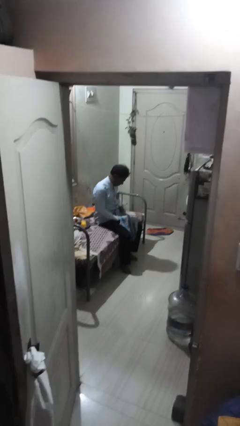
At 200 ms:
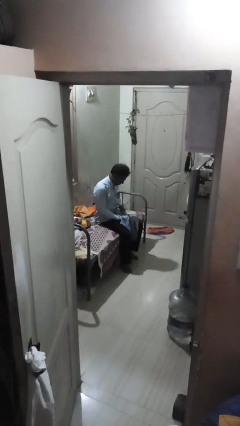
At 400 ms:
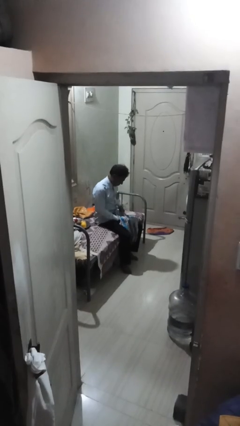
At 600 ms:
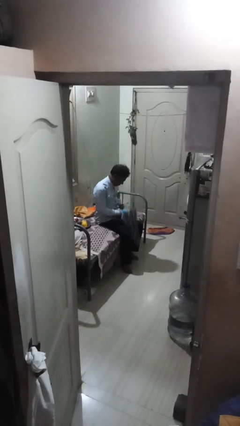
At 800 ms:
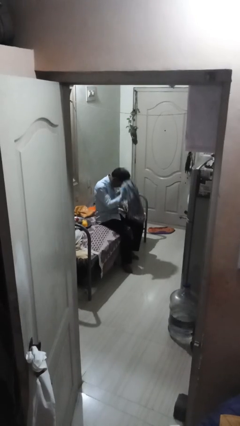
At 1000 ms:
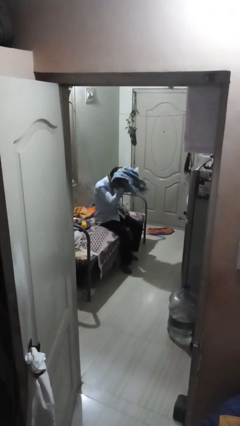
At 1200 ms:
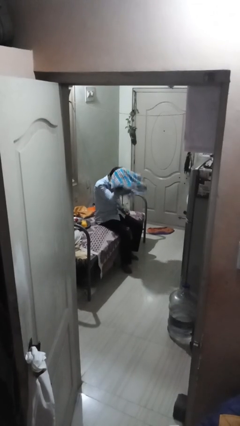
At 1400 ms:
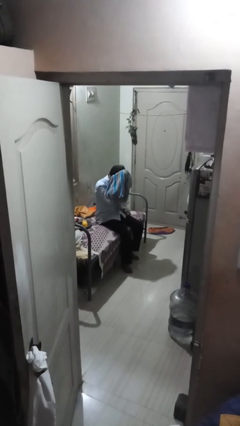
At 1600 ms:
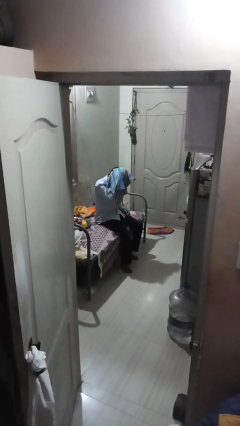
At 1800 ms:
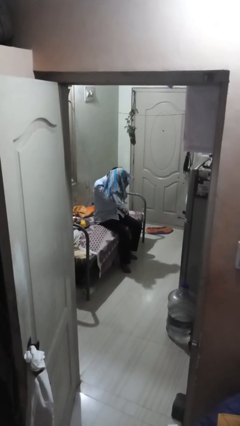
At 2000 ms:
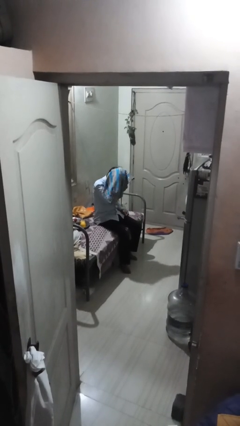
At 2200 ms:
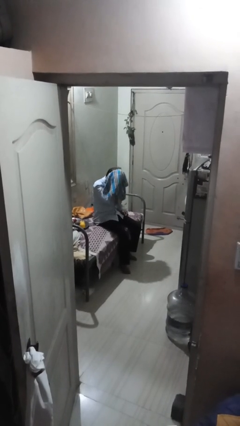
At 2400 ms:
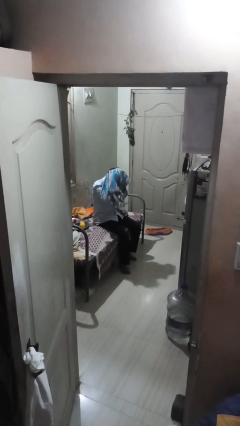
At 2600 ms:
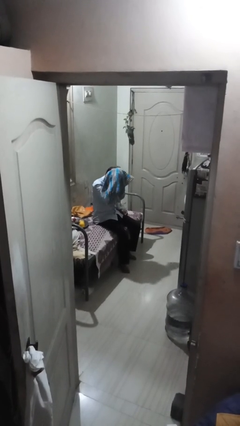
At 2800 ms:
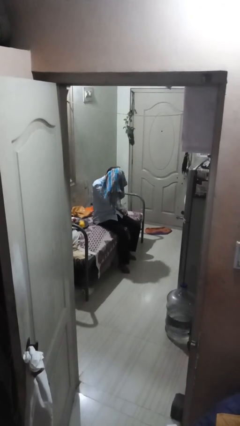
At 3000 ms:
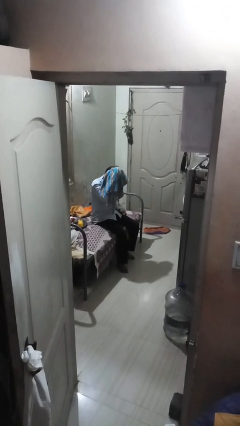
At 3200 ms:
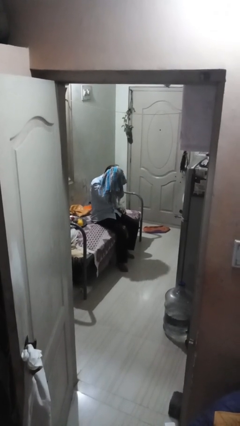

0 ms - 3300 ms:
person dries hair with towel

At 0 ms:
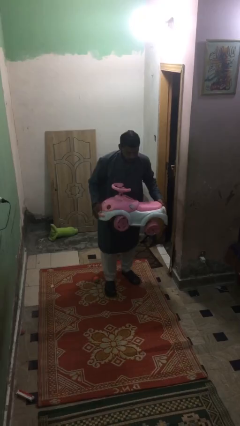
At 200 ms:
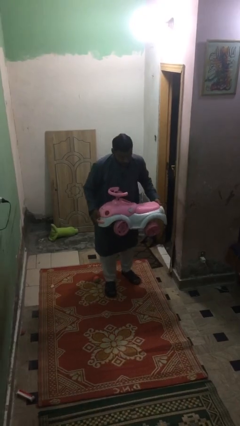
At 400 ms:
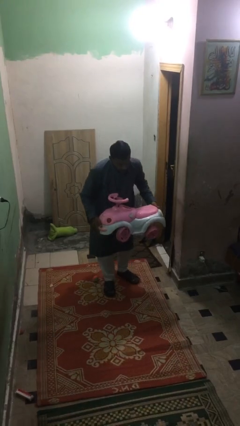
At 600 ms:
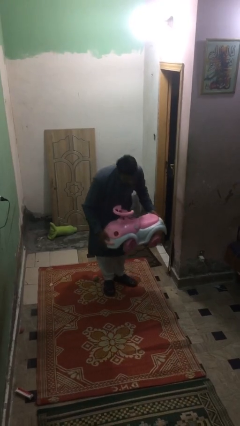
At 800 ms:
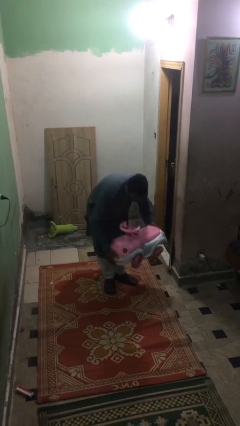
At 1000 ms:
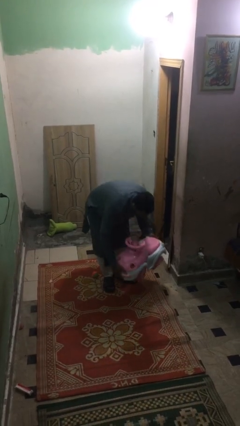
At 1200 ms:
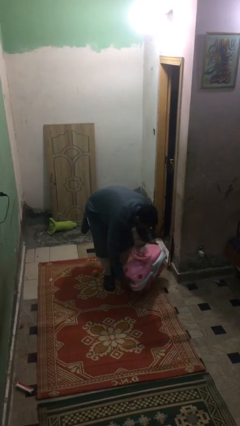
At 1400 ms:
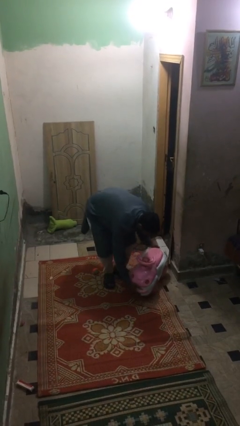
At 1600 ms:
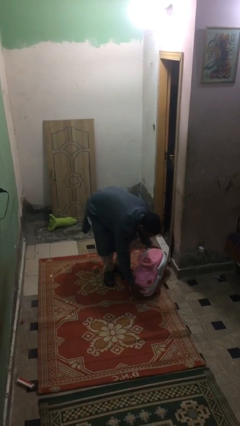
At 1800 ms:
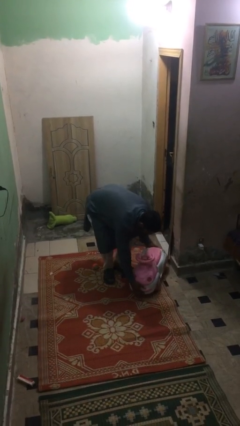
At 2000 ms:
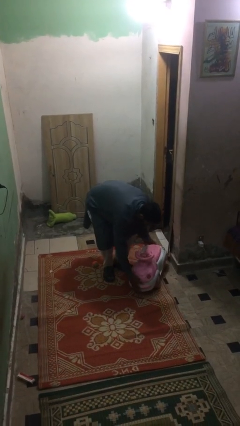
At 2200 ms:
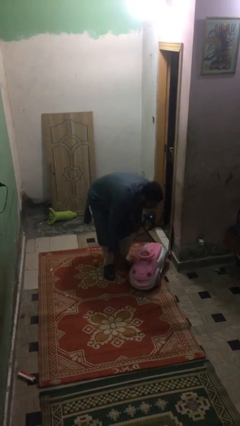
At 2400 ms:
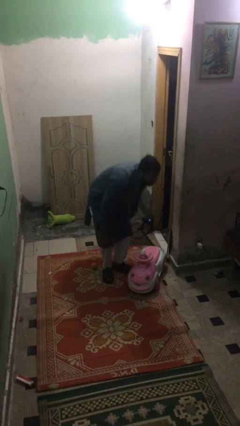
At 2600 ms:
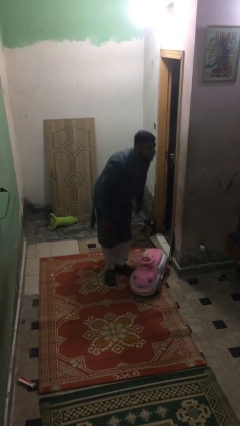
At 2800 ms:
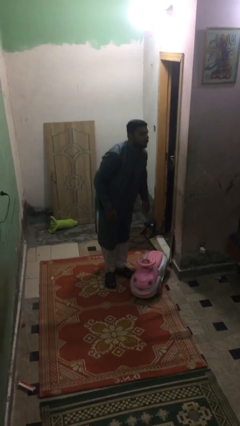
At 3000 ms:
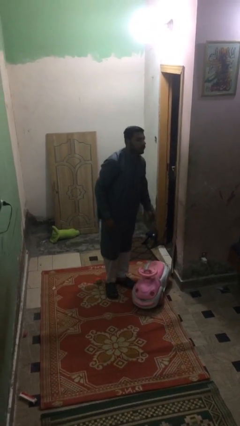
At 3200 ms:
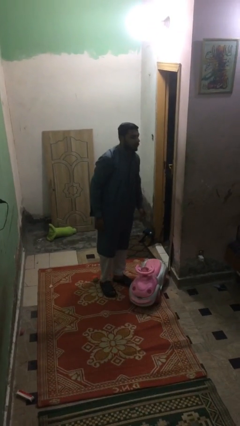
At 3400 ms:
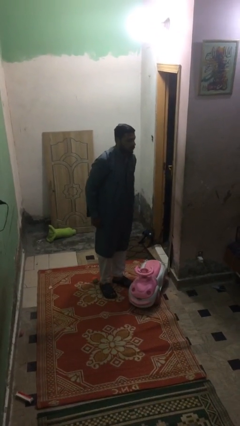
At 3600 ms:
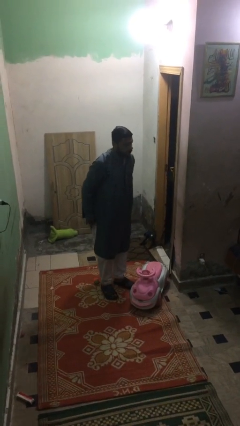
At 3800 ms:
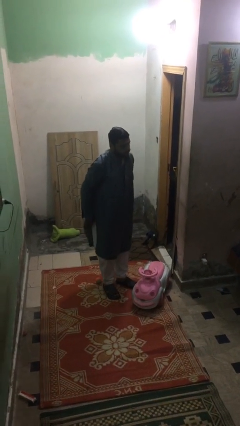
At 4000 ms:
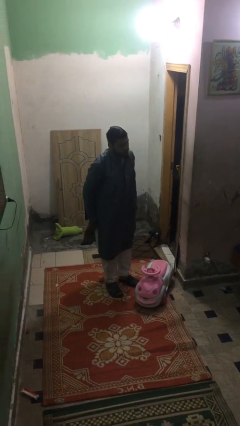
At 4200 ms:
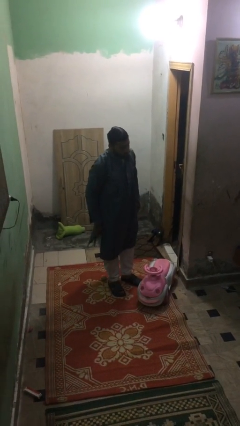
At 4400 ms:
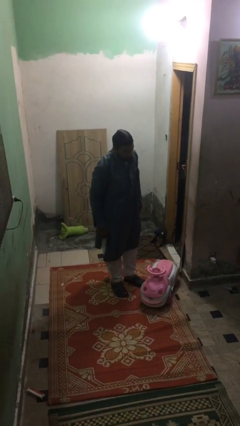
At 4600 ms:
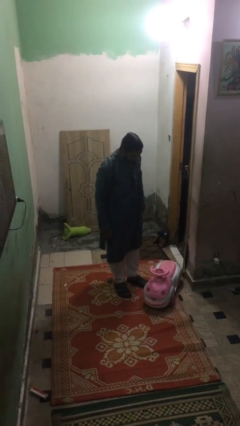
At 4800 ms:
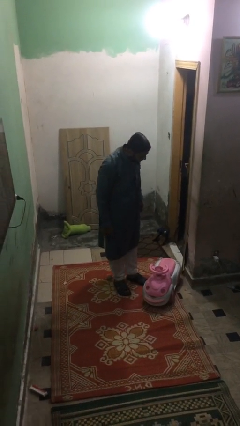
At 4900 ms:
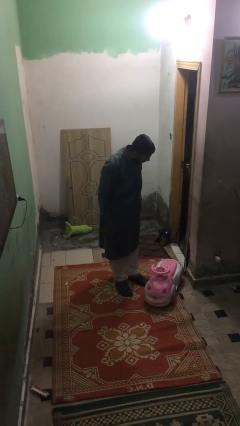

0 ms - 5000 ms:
person puts down object on floor

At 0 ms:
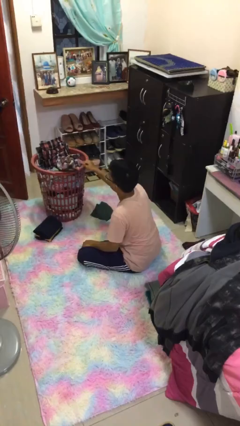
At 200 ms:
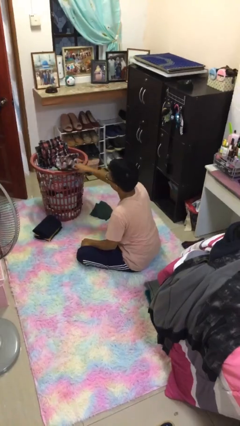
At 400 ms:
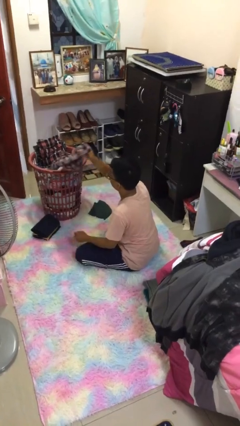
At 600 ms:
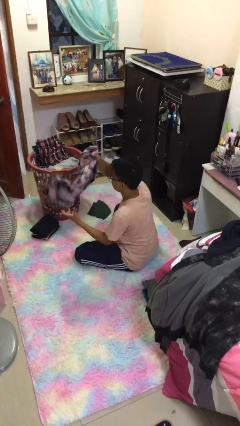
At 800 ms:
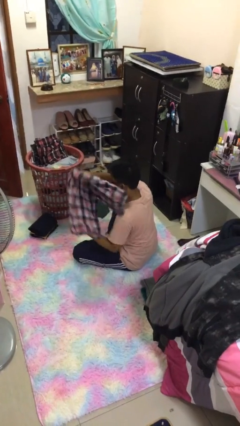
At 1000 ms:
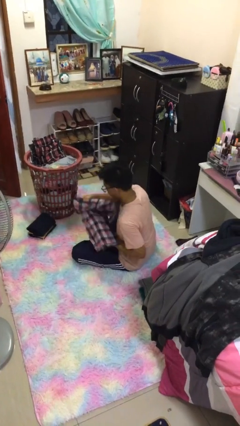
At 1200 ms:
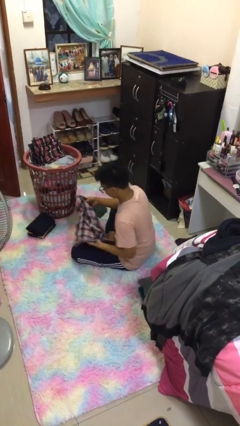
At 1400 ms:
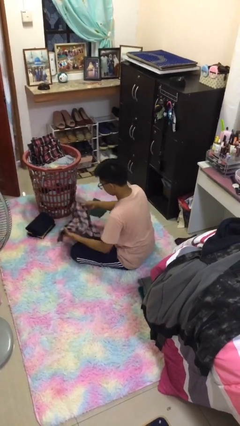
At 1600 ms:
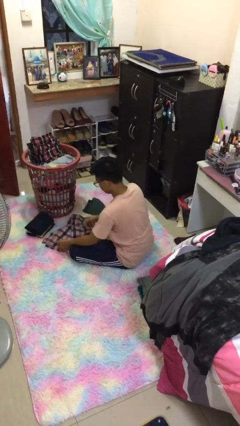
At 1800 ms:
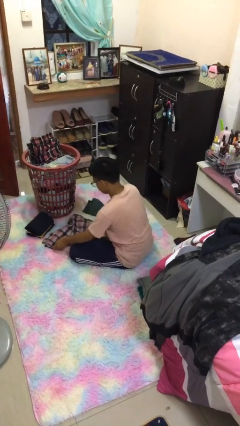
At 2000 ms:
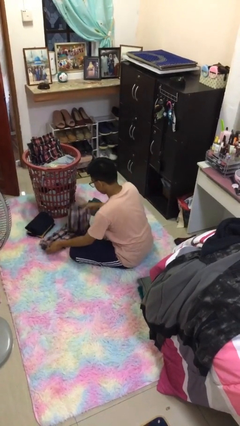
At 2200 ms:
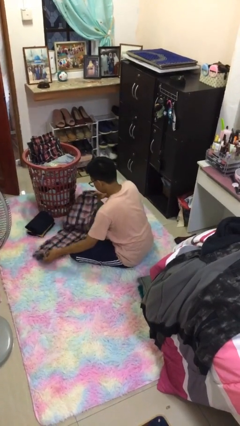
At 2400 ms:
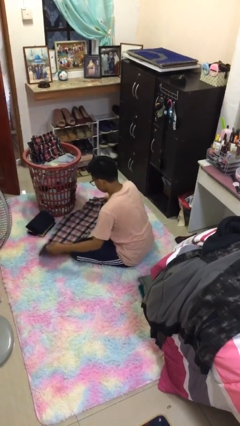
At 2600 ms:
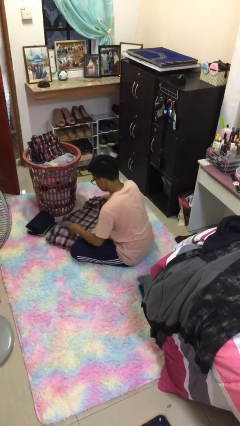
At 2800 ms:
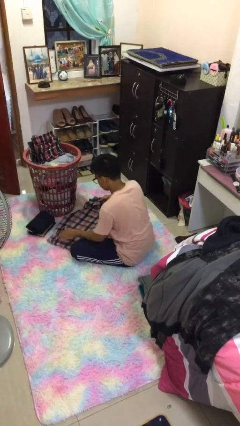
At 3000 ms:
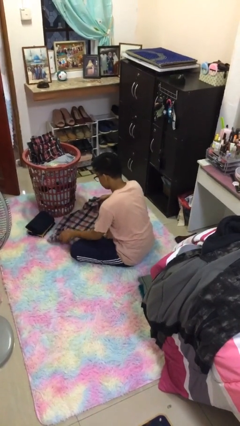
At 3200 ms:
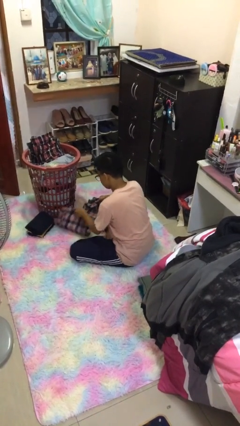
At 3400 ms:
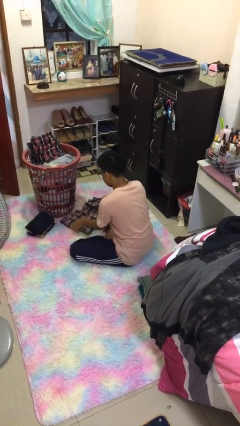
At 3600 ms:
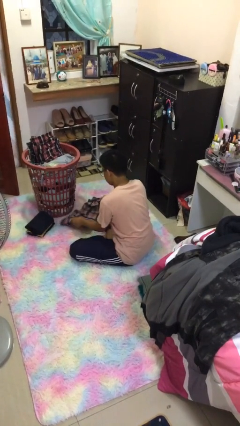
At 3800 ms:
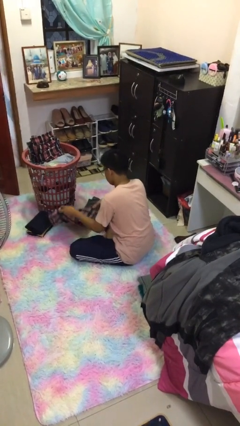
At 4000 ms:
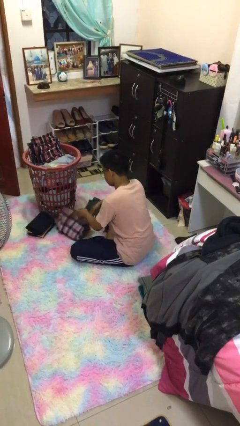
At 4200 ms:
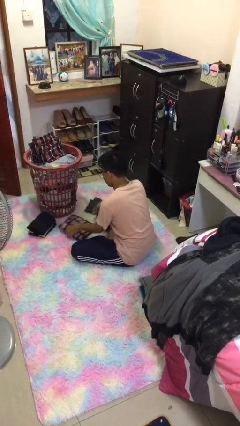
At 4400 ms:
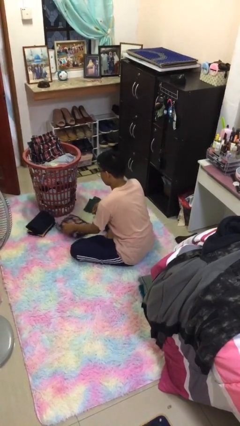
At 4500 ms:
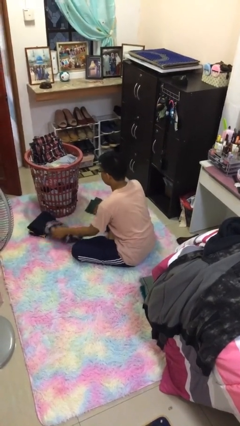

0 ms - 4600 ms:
person folds pants

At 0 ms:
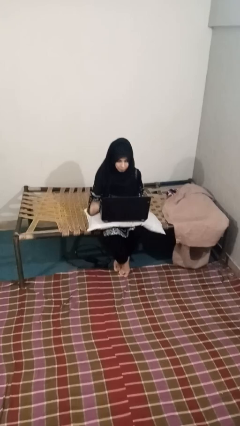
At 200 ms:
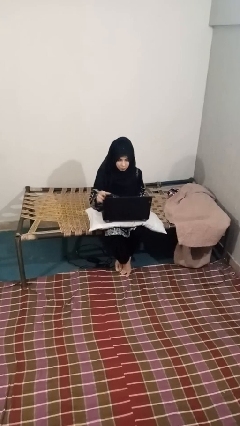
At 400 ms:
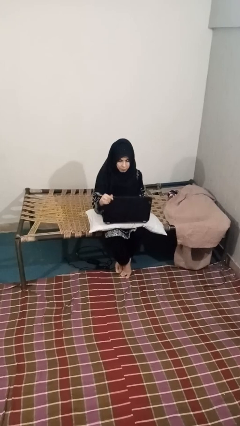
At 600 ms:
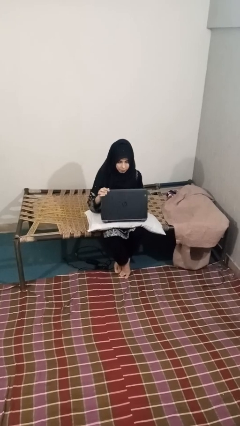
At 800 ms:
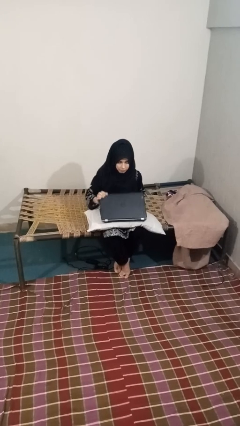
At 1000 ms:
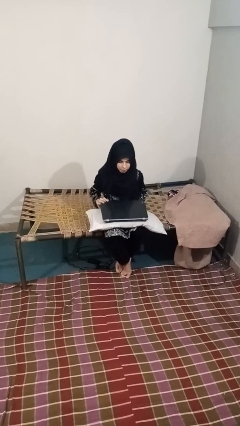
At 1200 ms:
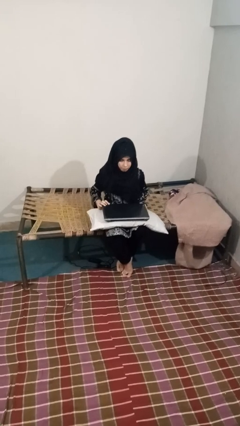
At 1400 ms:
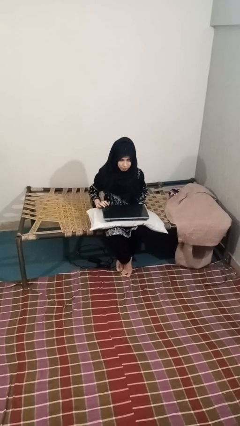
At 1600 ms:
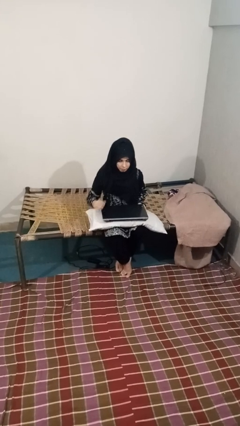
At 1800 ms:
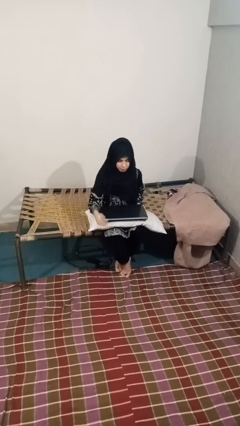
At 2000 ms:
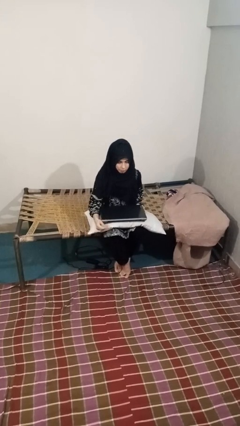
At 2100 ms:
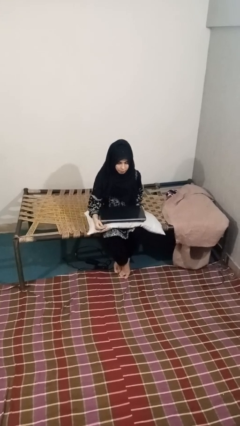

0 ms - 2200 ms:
person closes laptop

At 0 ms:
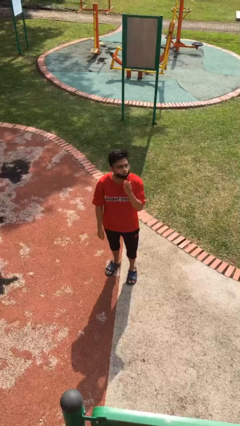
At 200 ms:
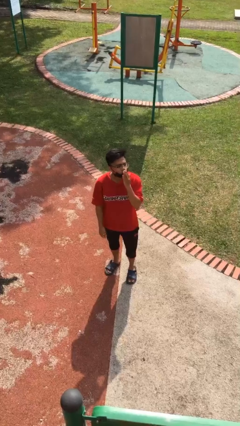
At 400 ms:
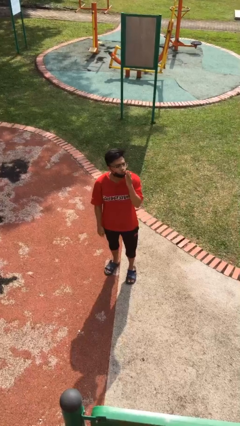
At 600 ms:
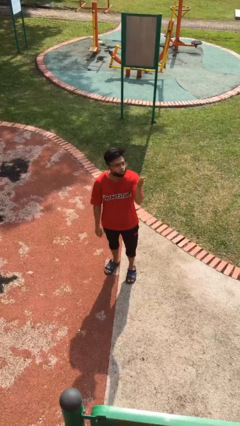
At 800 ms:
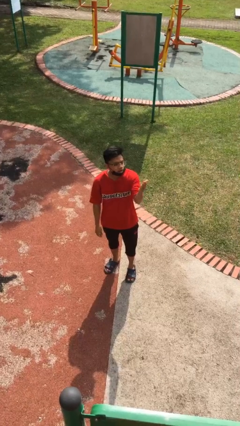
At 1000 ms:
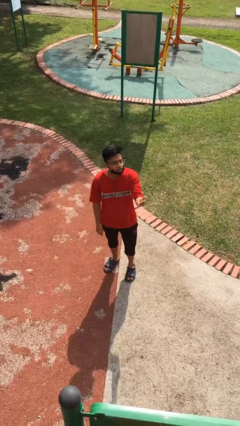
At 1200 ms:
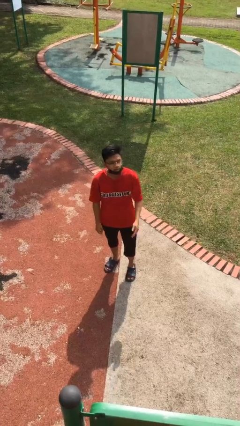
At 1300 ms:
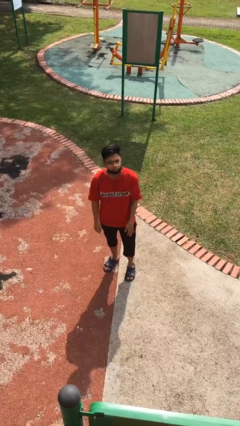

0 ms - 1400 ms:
person gestures blow kiss

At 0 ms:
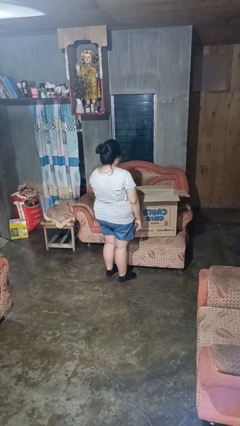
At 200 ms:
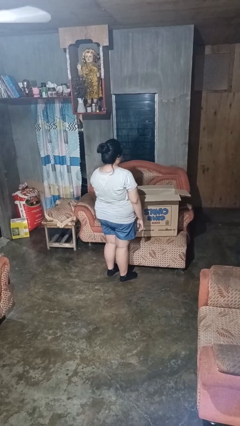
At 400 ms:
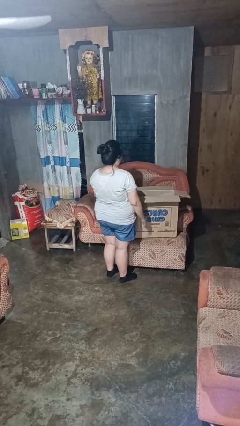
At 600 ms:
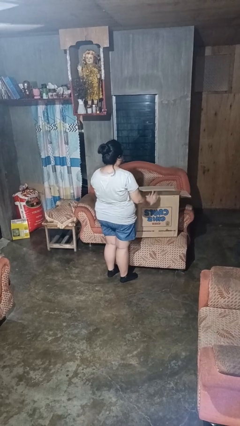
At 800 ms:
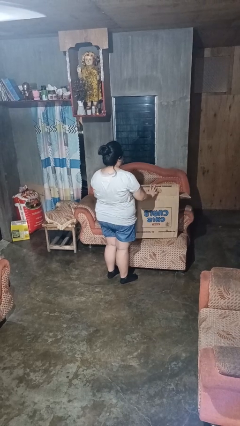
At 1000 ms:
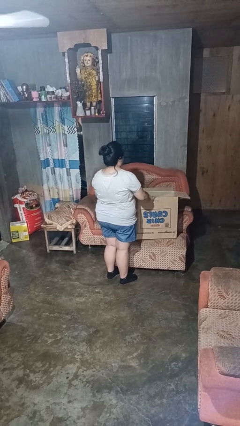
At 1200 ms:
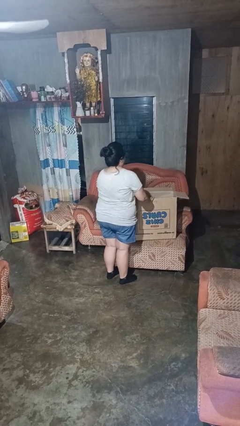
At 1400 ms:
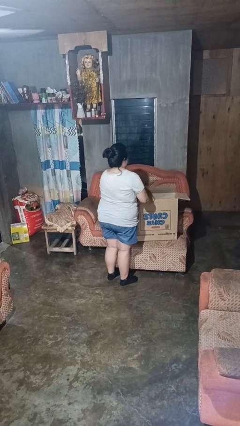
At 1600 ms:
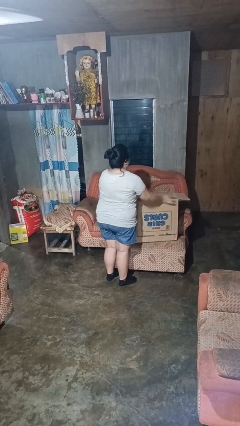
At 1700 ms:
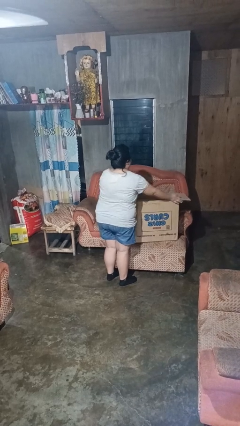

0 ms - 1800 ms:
person closes box
